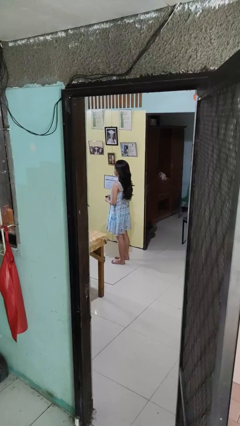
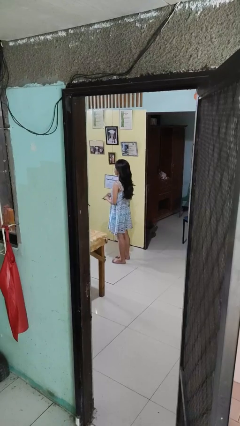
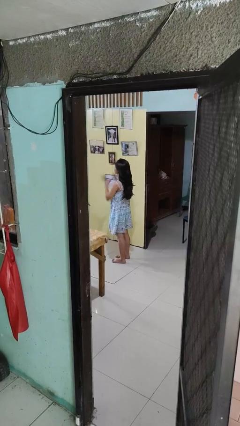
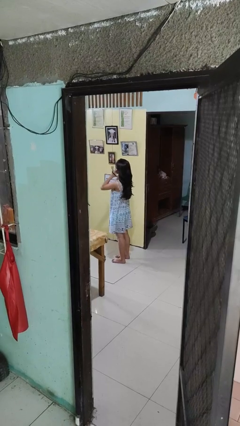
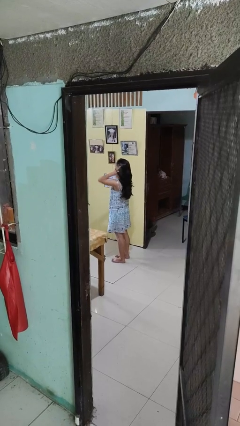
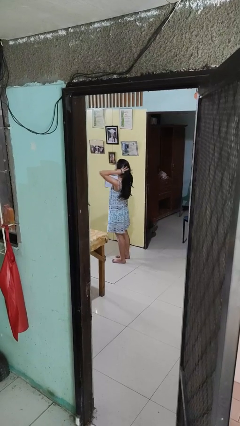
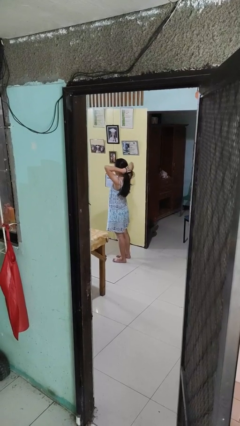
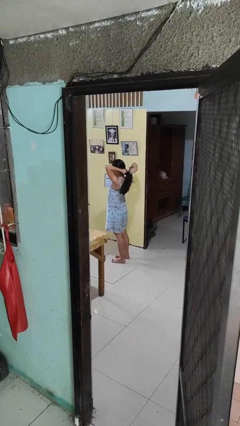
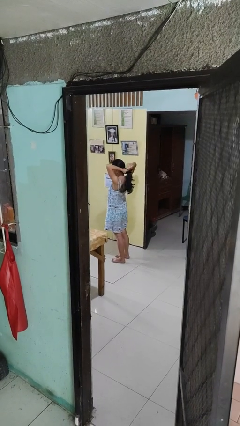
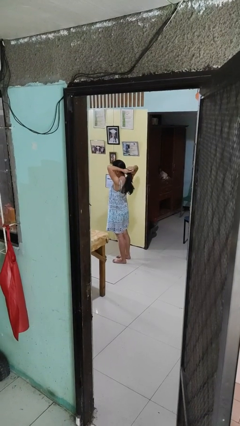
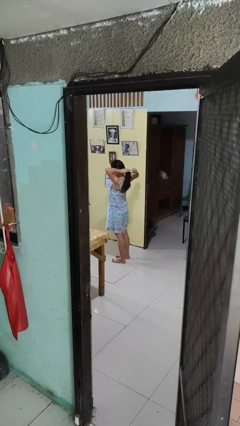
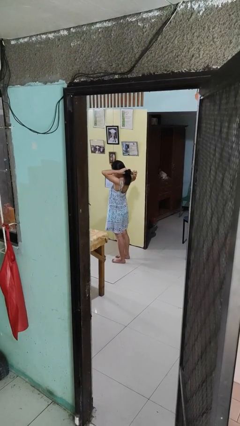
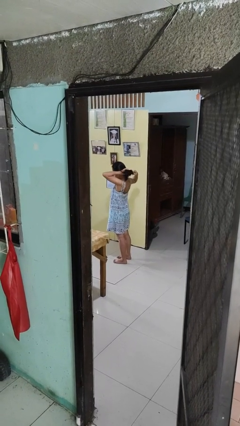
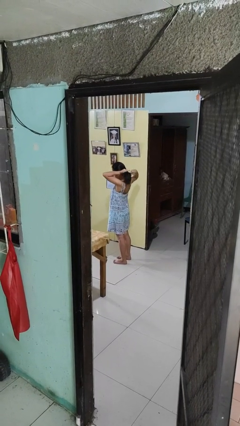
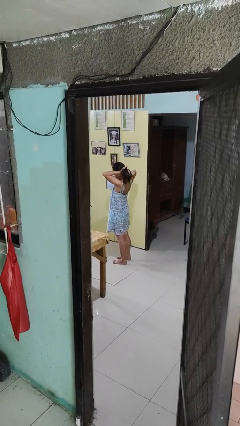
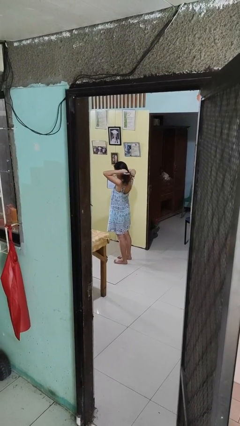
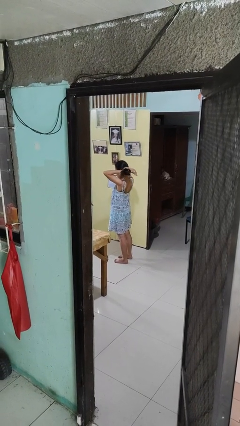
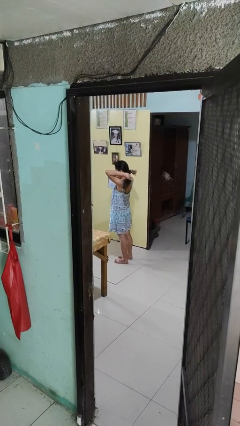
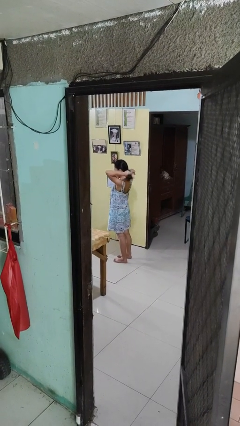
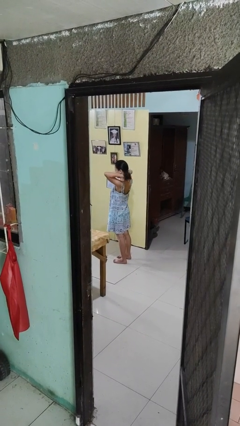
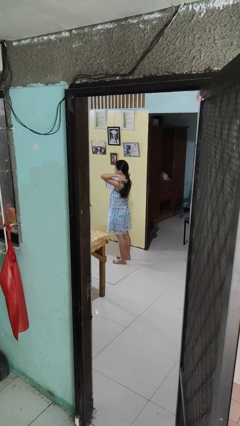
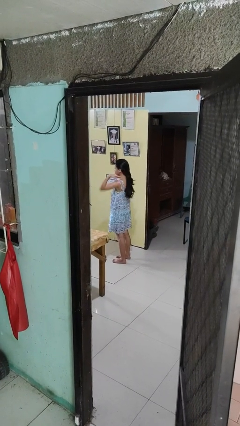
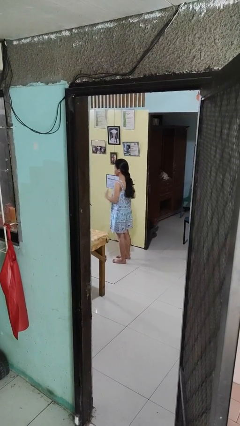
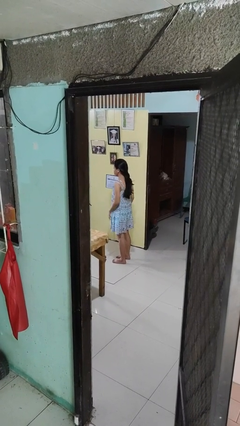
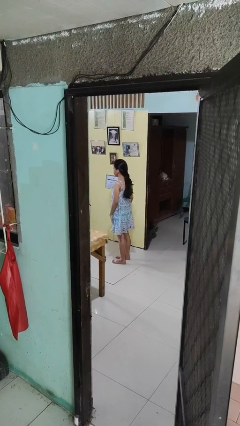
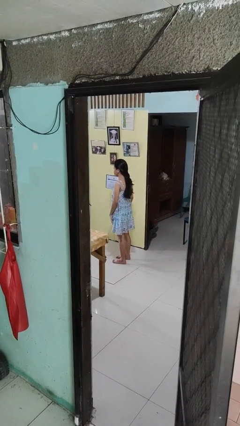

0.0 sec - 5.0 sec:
person puts hair in ponytail

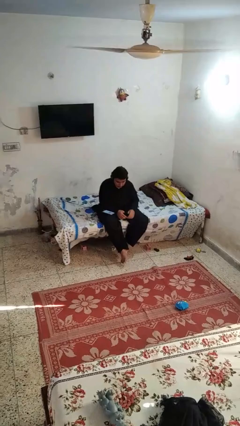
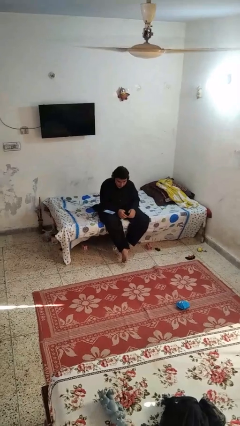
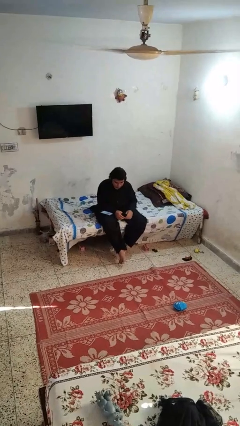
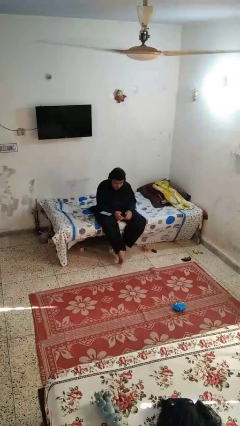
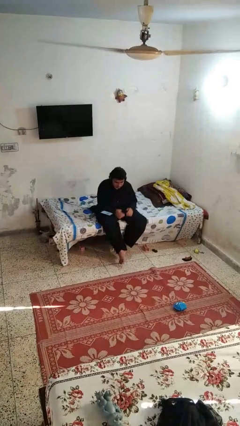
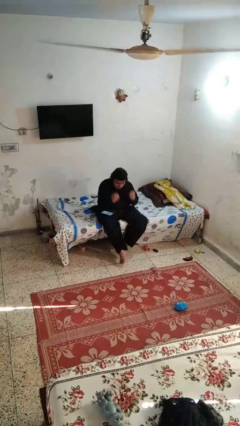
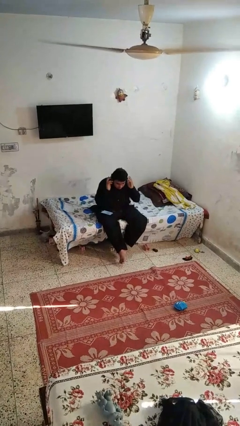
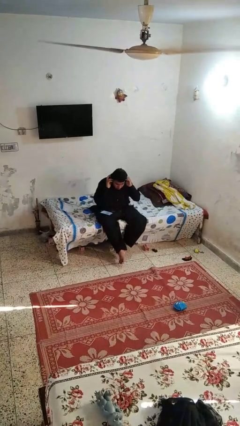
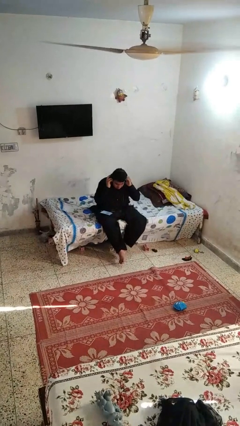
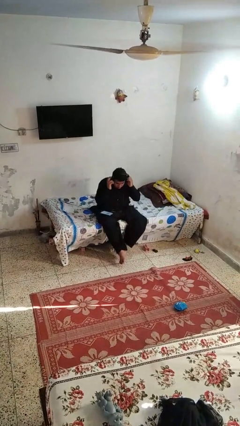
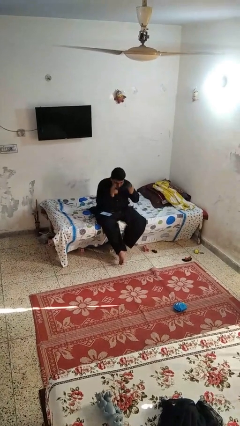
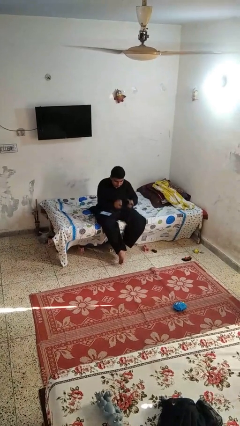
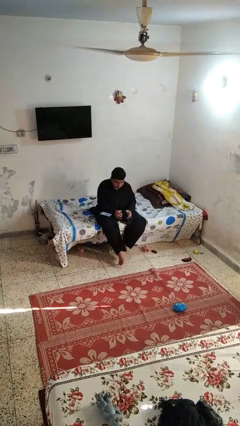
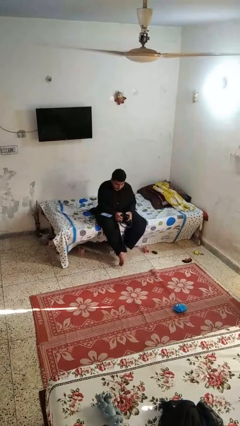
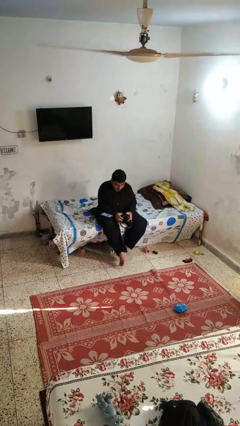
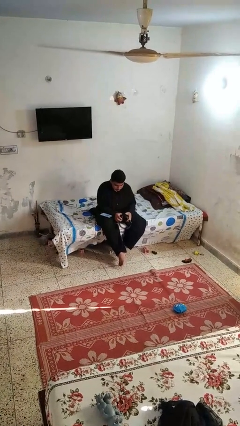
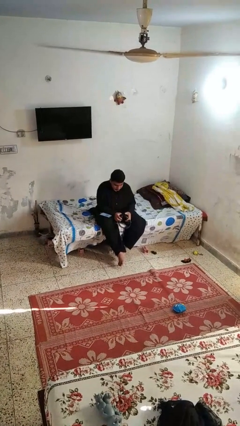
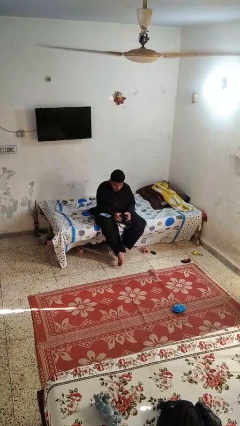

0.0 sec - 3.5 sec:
person takes off headphones

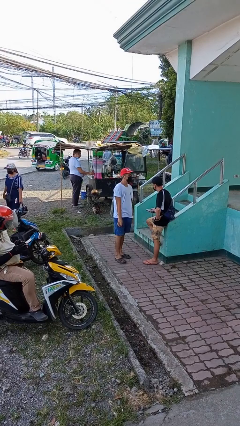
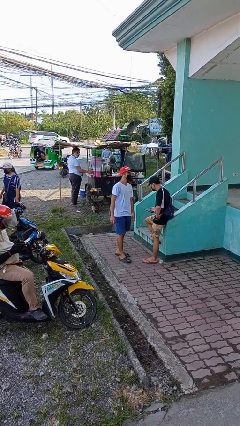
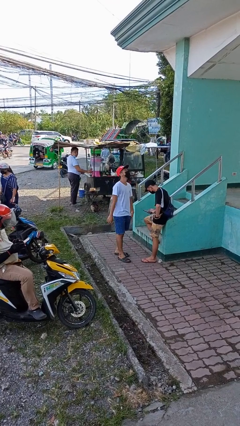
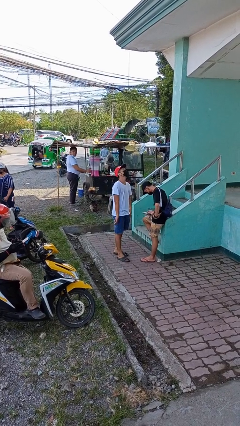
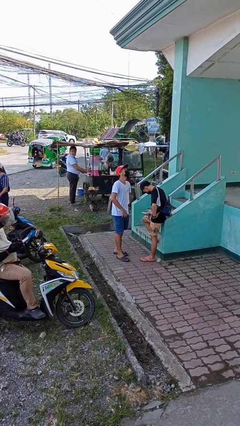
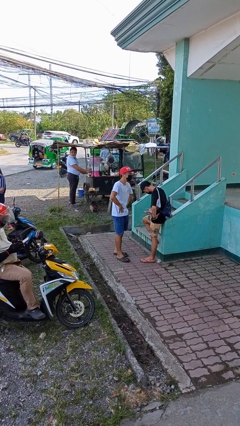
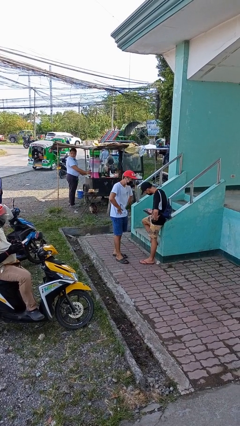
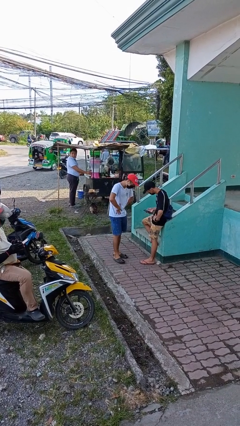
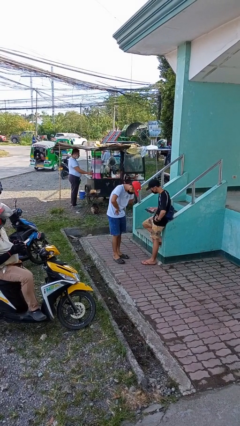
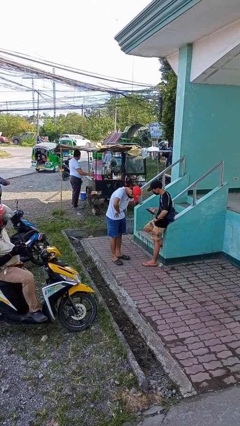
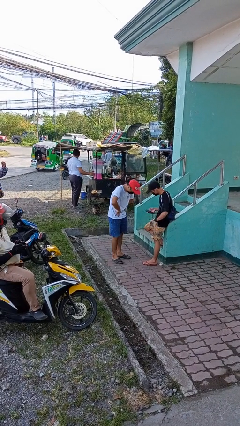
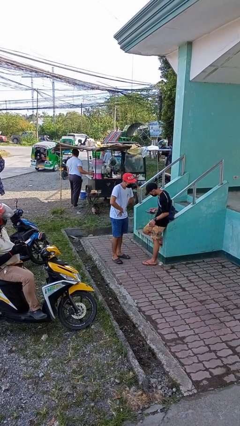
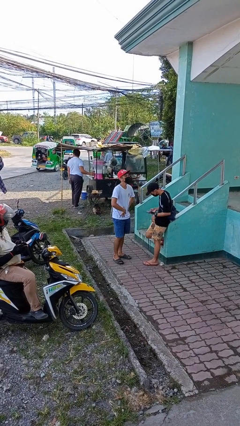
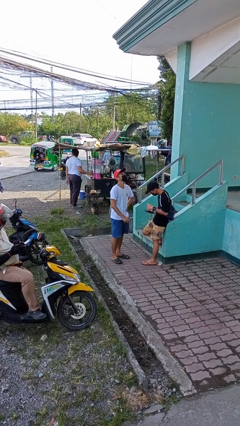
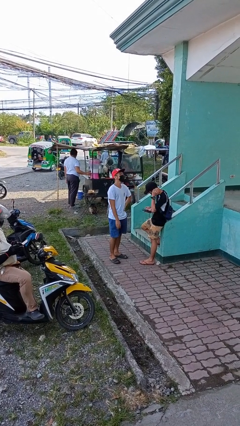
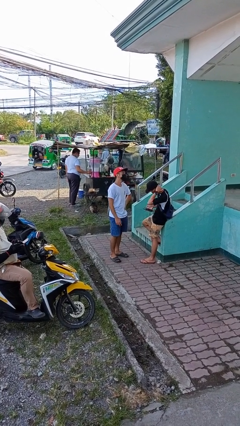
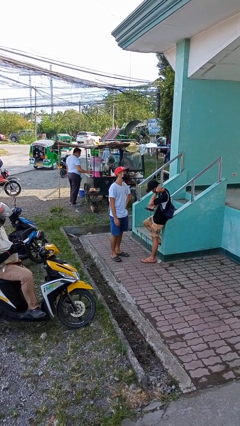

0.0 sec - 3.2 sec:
person laughs with person

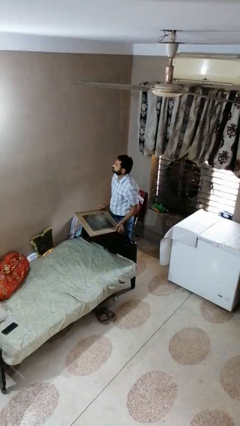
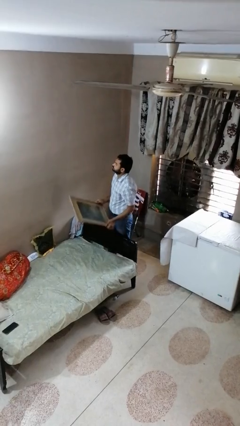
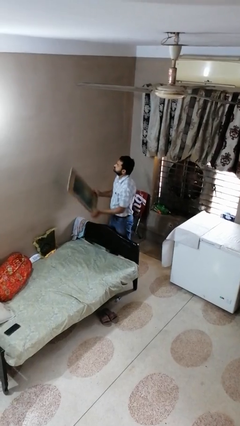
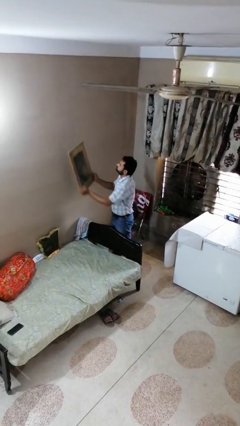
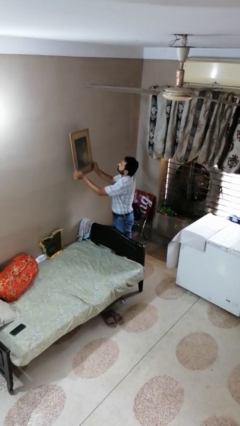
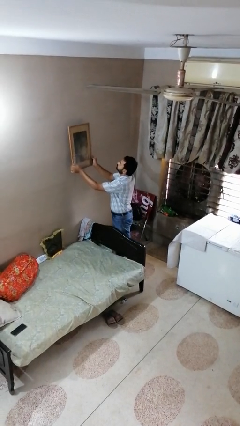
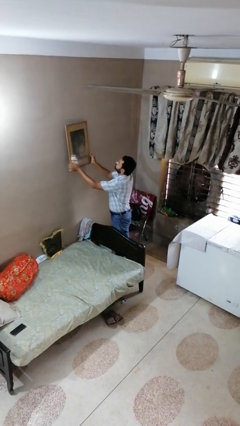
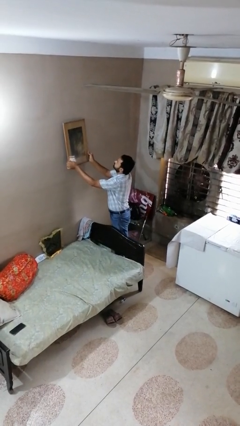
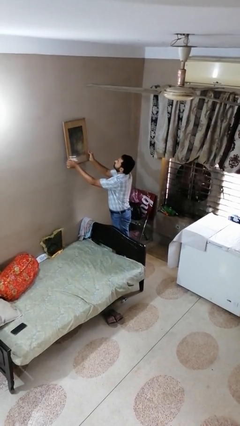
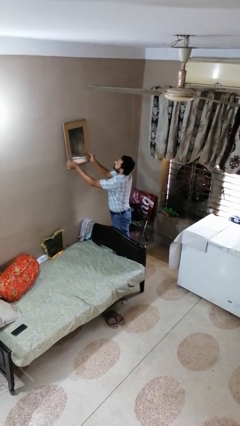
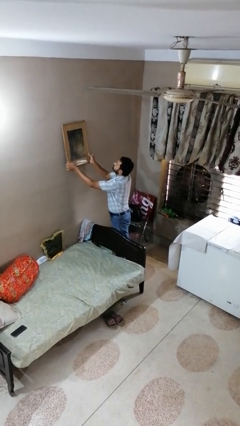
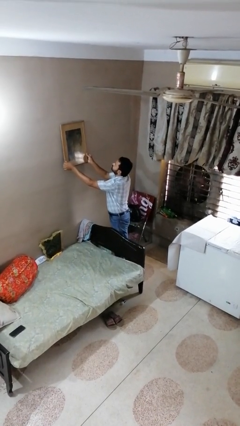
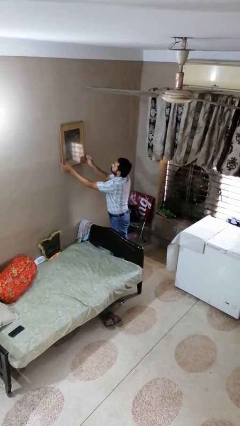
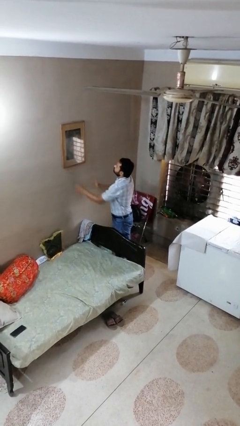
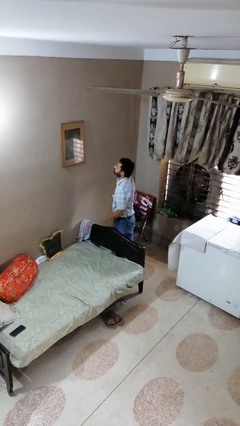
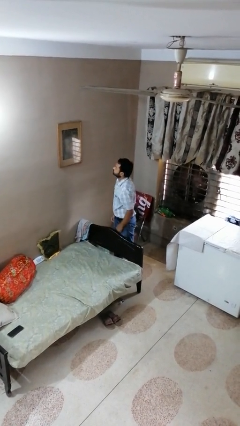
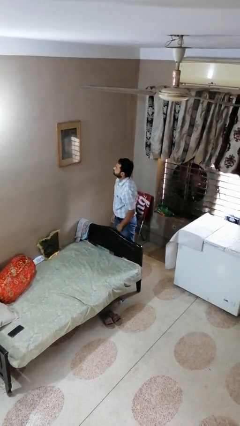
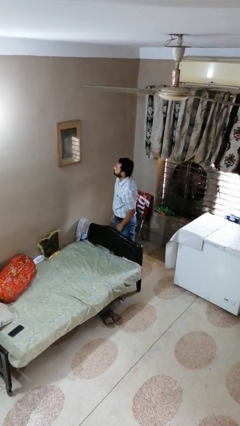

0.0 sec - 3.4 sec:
person puts up picture frame

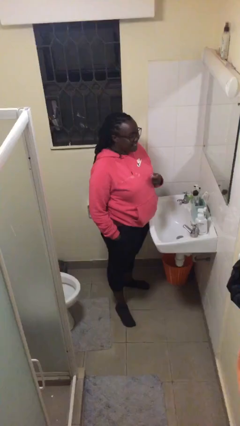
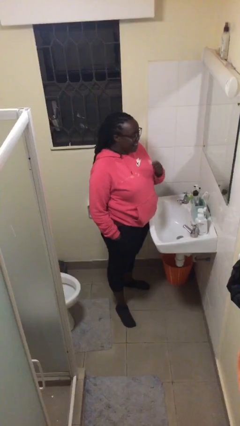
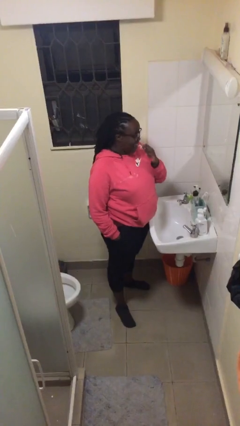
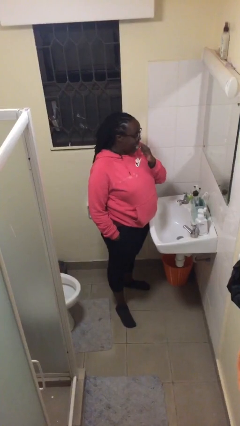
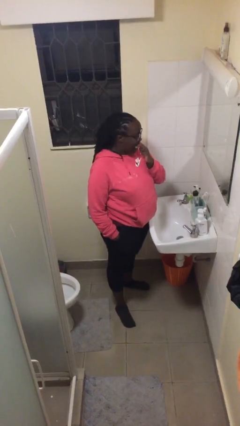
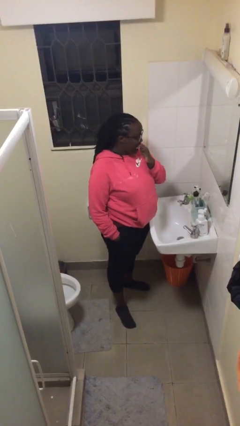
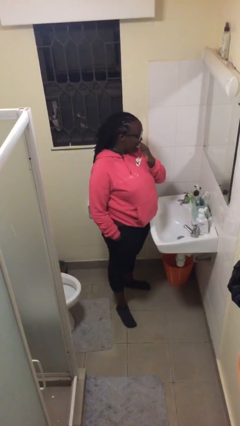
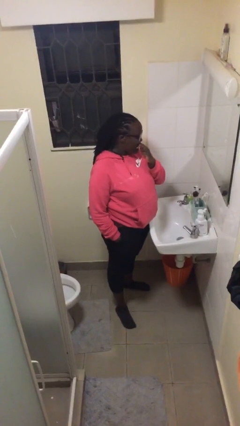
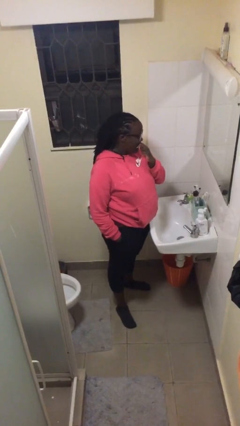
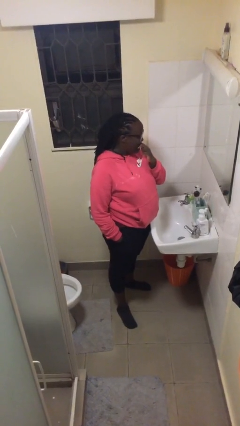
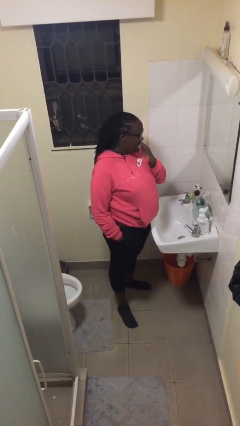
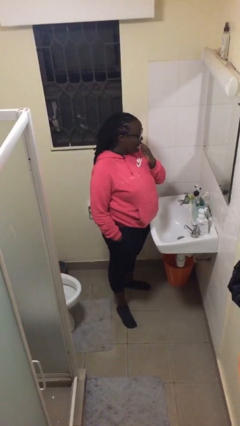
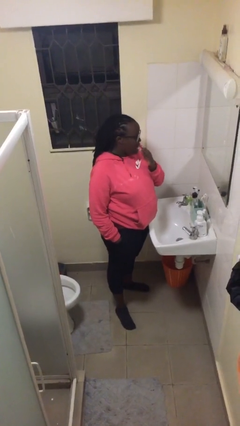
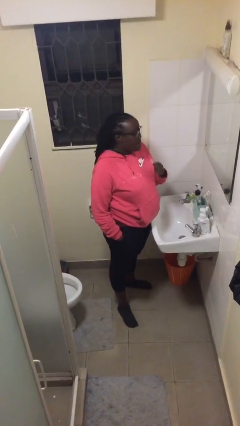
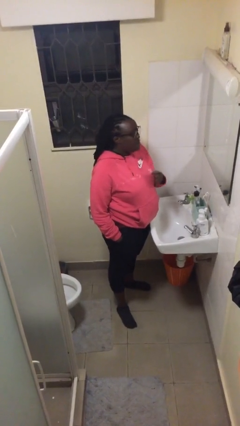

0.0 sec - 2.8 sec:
person flosses
